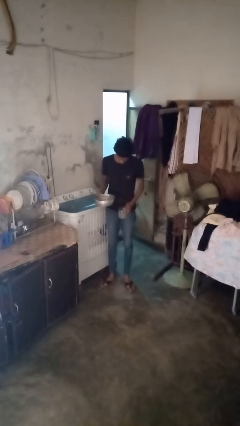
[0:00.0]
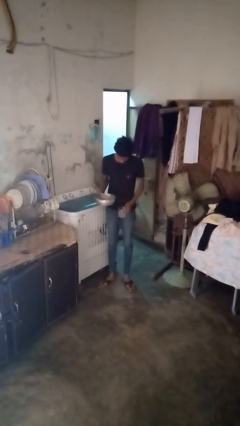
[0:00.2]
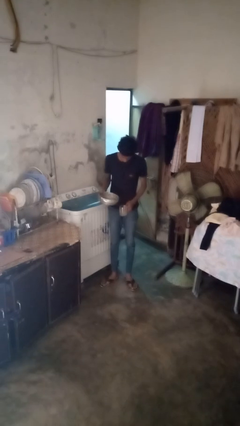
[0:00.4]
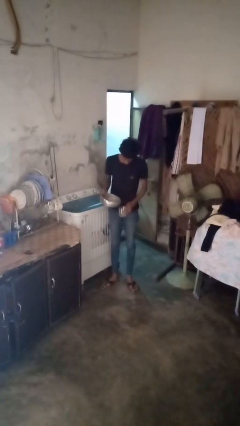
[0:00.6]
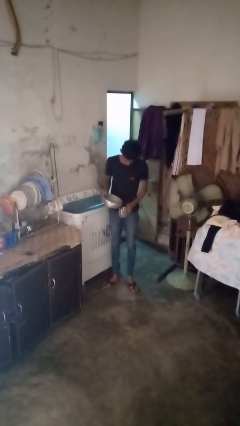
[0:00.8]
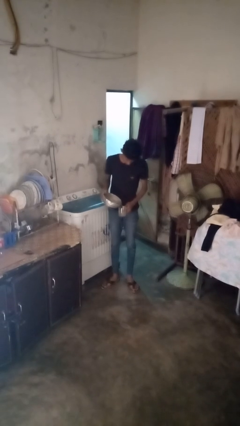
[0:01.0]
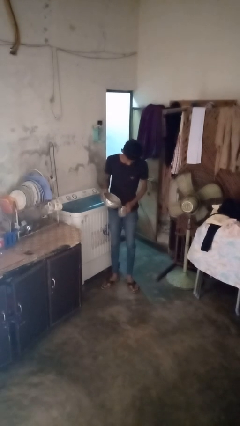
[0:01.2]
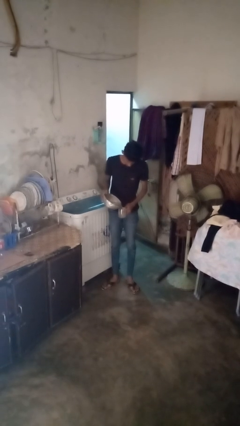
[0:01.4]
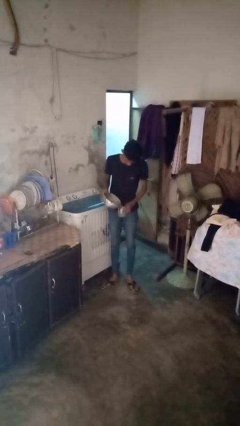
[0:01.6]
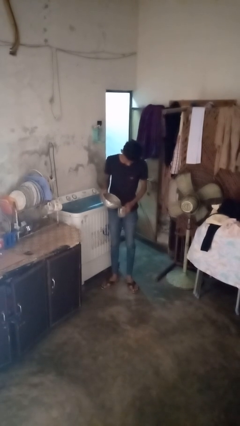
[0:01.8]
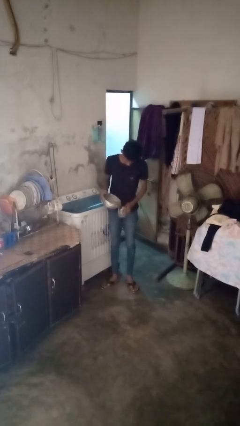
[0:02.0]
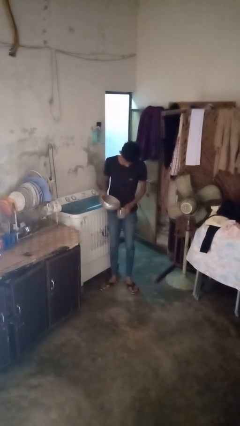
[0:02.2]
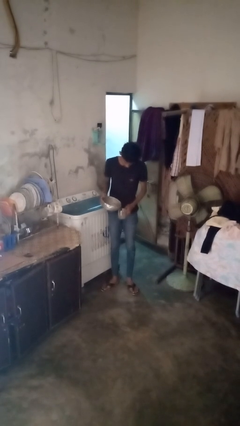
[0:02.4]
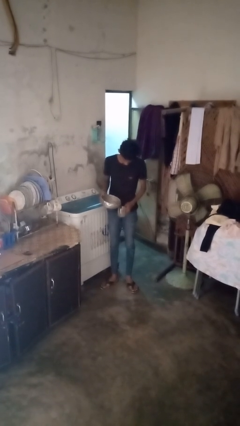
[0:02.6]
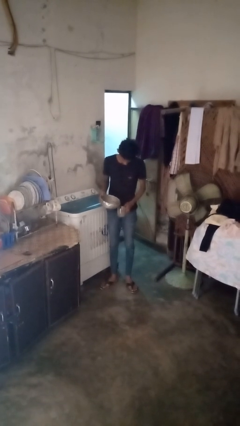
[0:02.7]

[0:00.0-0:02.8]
person pours liquid into cup

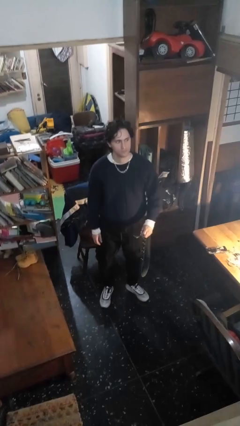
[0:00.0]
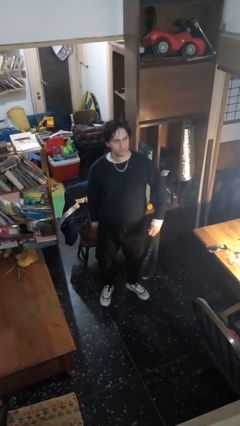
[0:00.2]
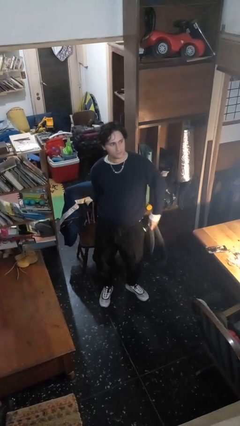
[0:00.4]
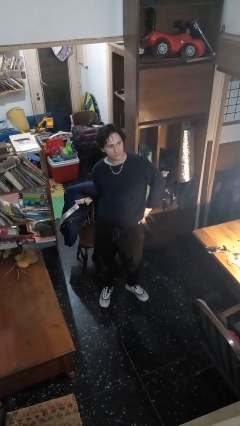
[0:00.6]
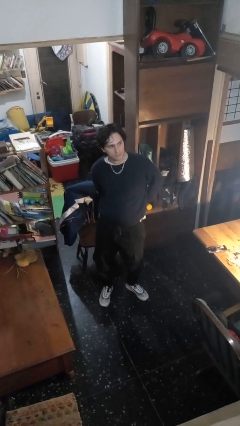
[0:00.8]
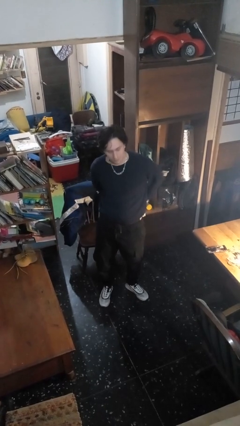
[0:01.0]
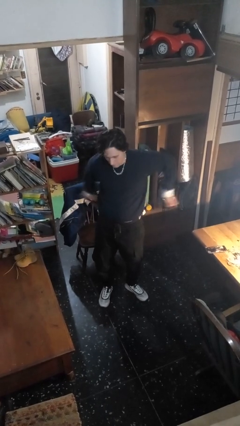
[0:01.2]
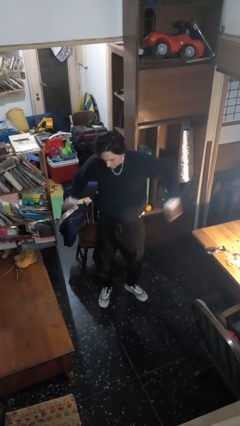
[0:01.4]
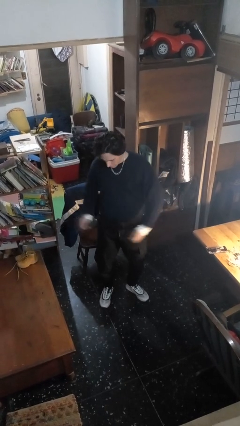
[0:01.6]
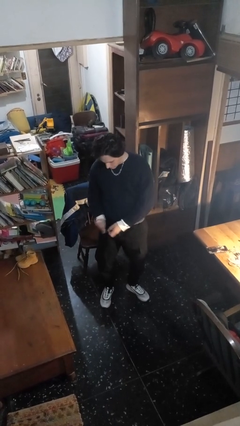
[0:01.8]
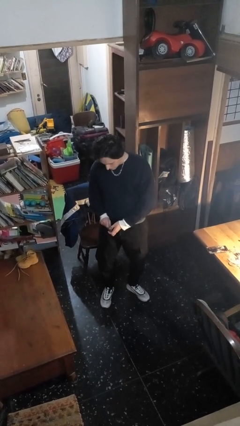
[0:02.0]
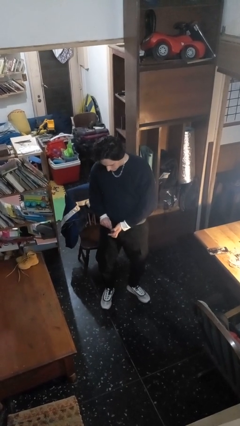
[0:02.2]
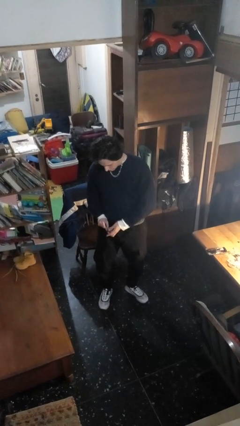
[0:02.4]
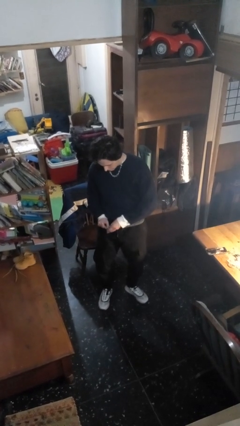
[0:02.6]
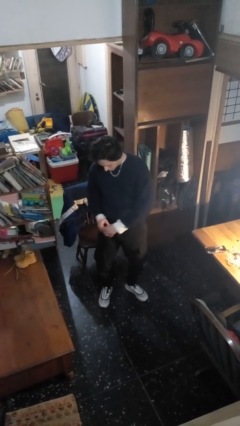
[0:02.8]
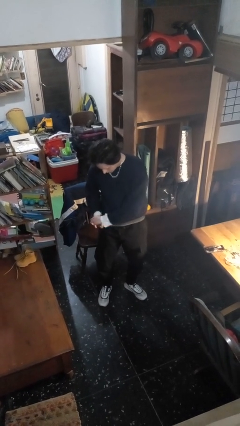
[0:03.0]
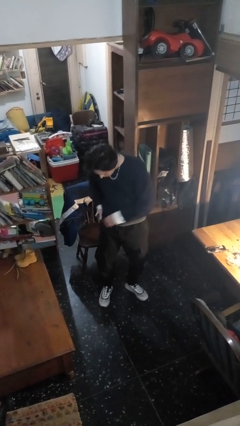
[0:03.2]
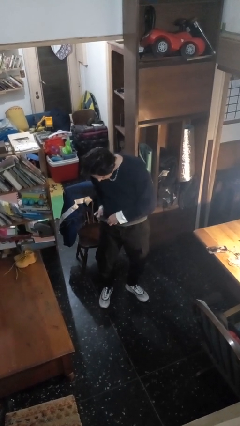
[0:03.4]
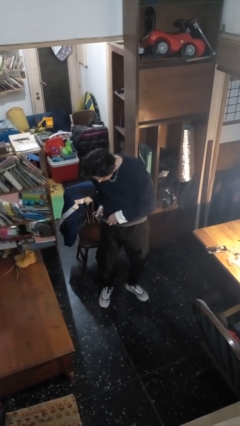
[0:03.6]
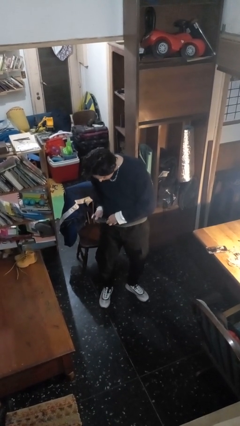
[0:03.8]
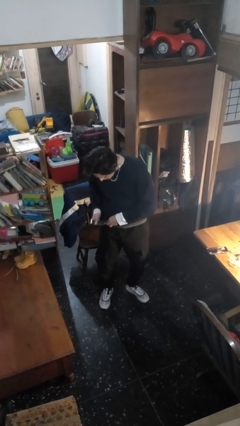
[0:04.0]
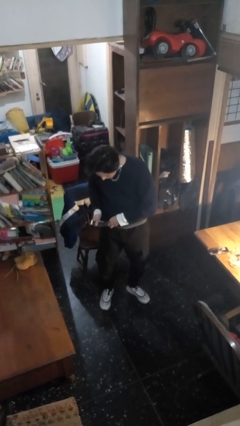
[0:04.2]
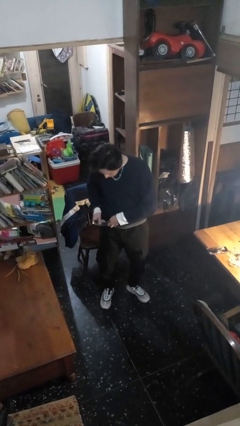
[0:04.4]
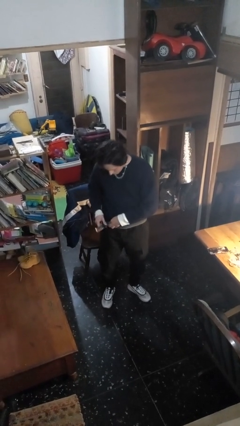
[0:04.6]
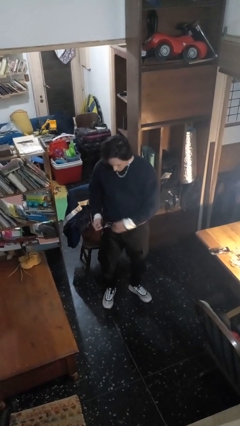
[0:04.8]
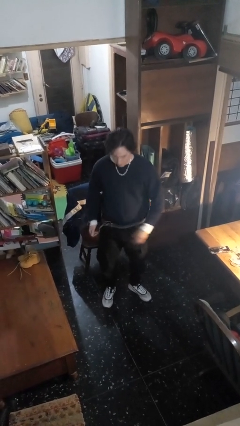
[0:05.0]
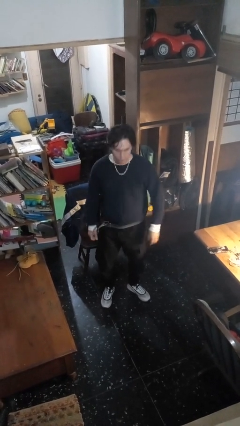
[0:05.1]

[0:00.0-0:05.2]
person puts on belt

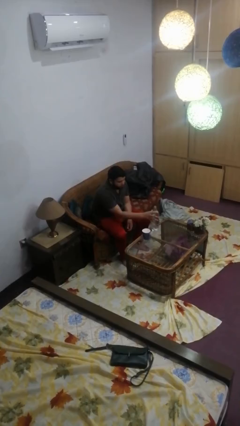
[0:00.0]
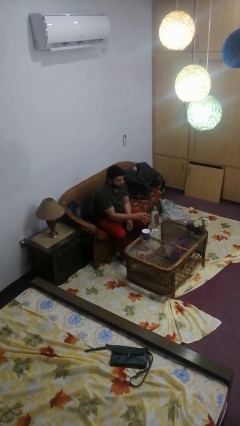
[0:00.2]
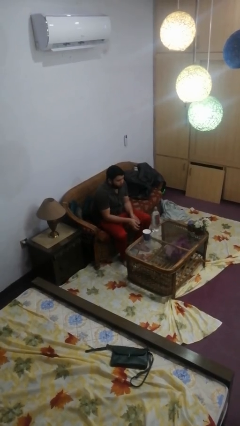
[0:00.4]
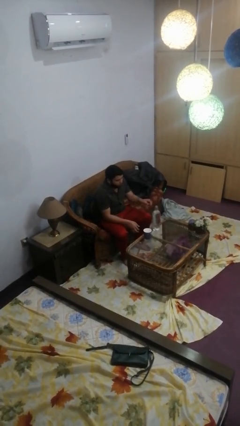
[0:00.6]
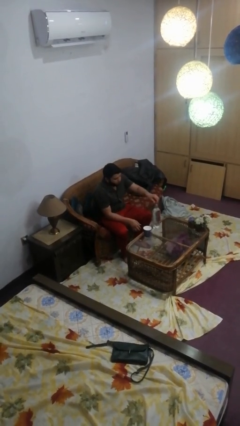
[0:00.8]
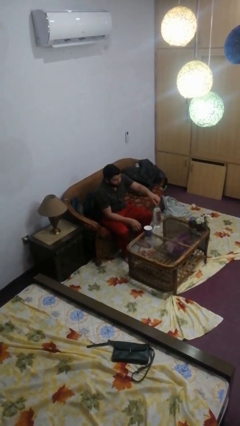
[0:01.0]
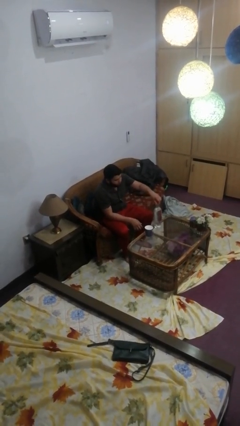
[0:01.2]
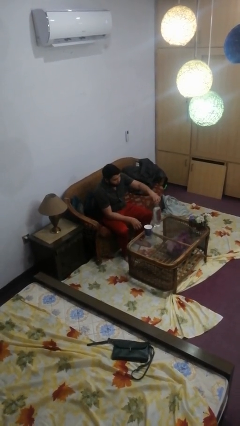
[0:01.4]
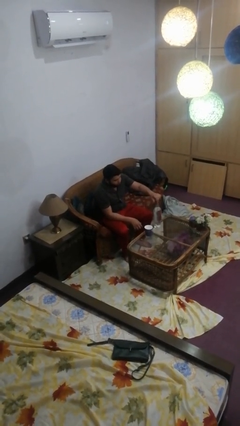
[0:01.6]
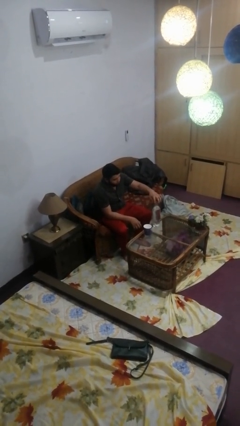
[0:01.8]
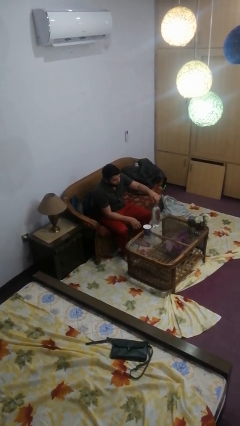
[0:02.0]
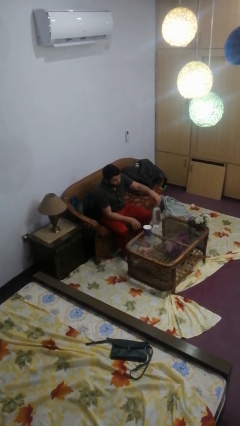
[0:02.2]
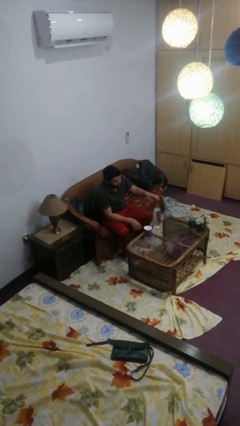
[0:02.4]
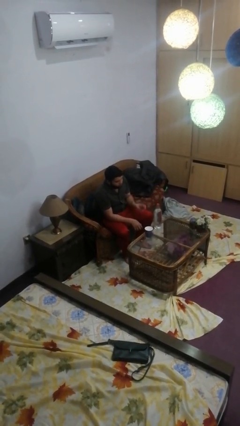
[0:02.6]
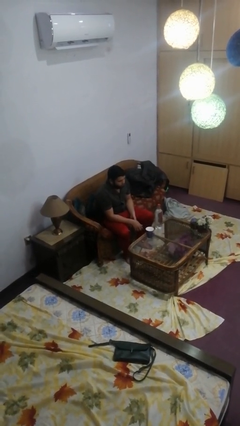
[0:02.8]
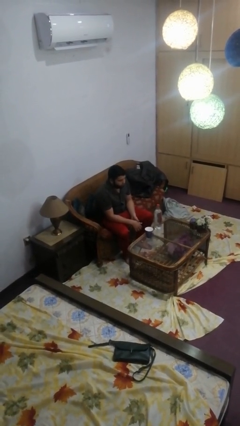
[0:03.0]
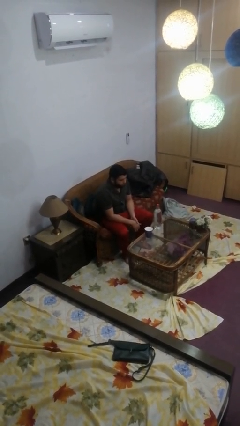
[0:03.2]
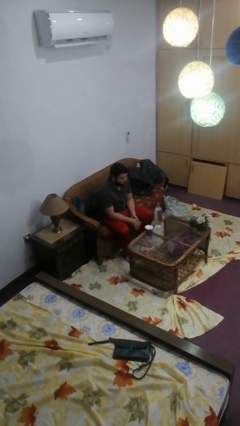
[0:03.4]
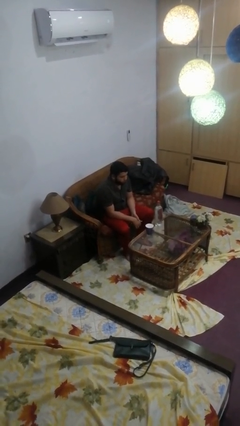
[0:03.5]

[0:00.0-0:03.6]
person screws lid to bottle

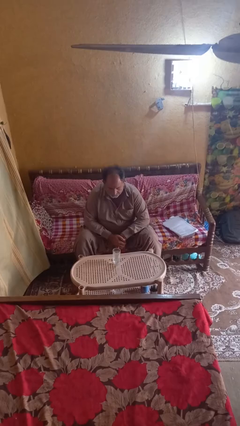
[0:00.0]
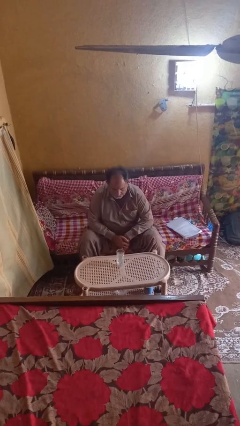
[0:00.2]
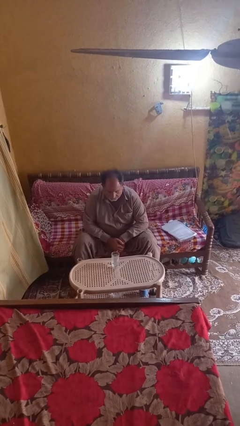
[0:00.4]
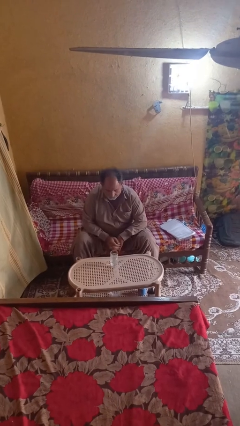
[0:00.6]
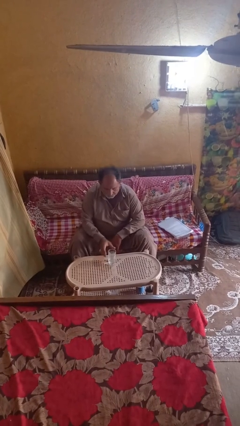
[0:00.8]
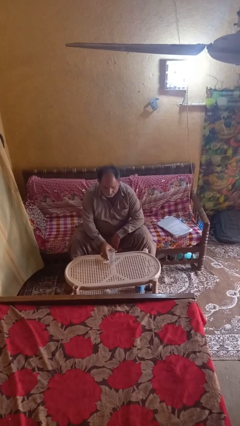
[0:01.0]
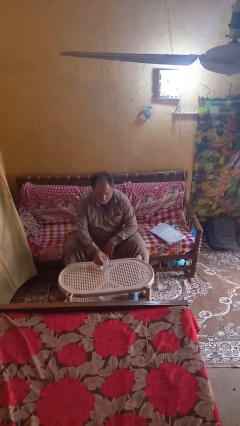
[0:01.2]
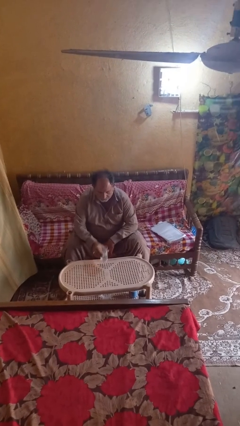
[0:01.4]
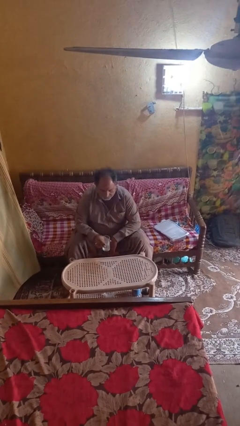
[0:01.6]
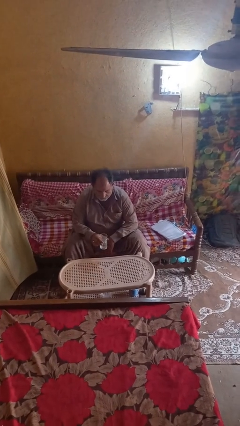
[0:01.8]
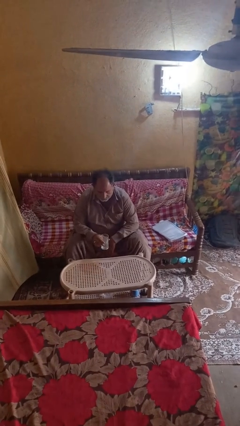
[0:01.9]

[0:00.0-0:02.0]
person picks up object from table

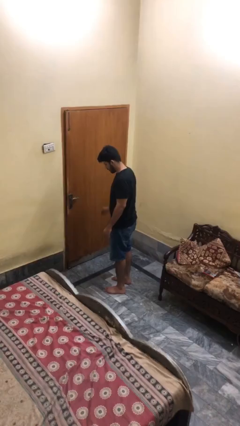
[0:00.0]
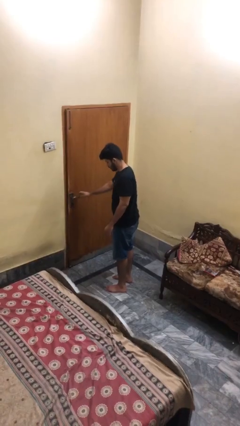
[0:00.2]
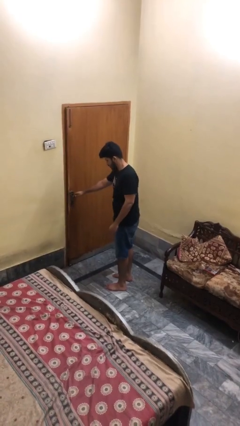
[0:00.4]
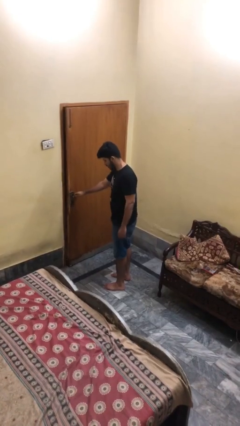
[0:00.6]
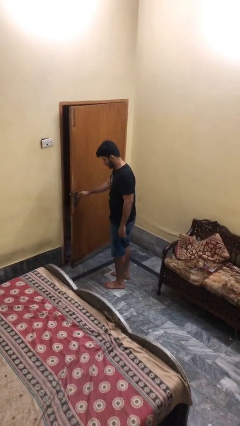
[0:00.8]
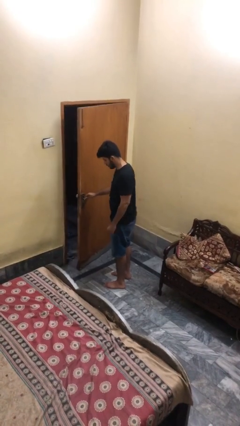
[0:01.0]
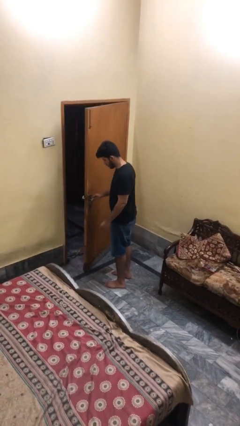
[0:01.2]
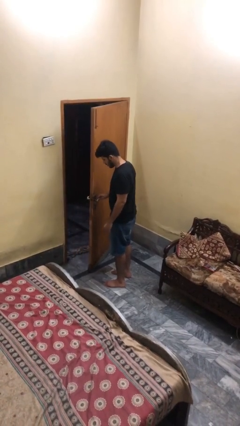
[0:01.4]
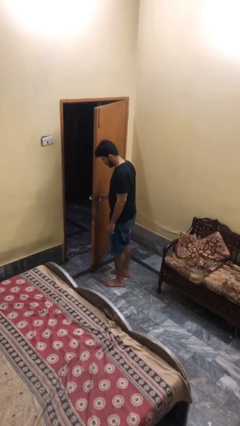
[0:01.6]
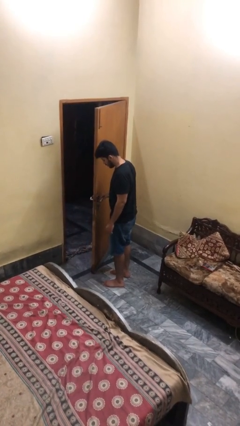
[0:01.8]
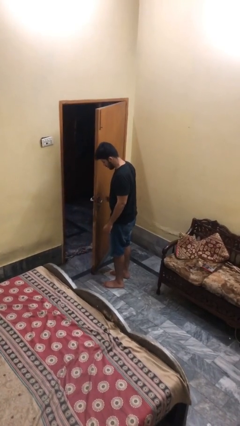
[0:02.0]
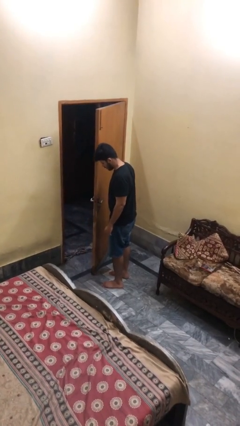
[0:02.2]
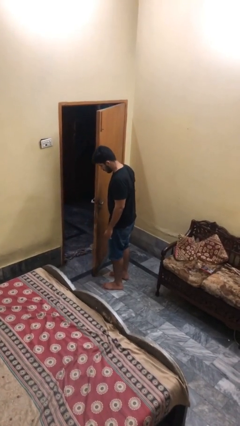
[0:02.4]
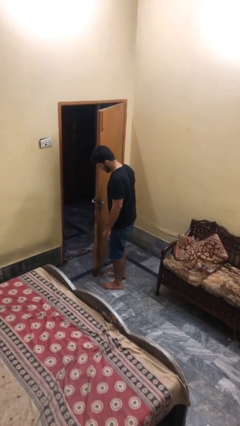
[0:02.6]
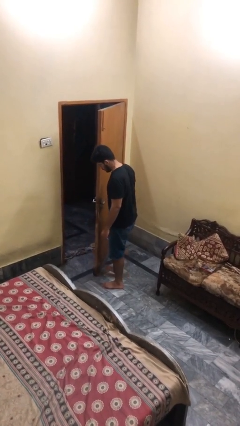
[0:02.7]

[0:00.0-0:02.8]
person opens facility door

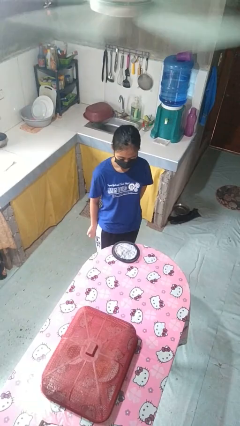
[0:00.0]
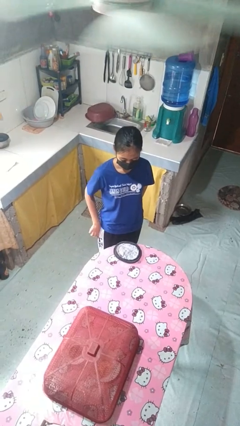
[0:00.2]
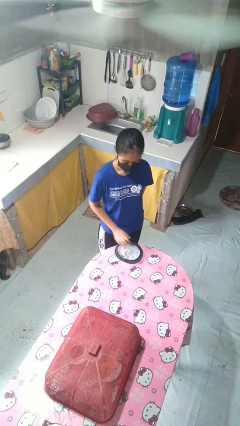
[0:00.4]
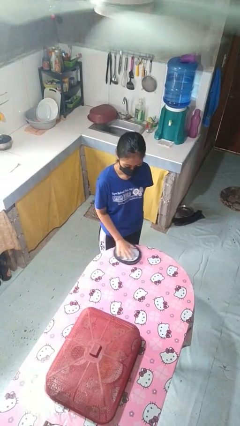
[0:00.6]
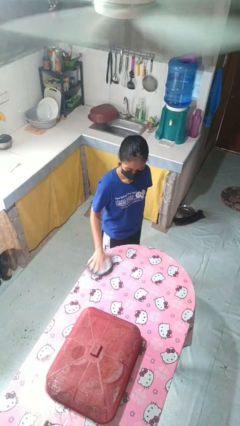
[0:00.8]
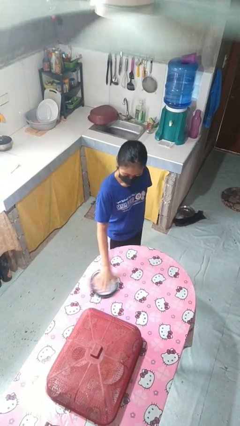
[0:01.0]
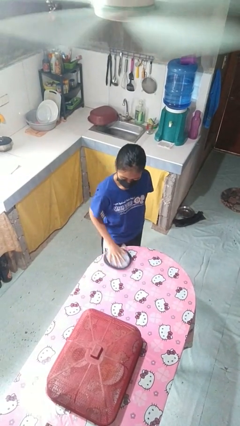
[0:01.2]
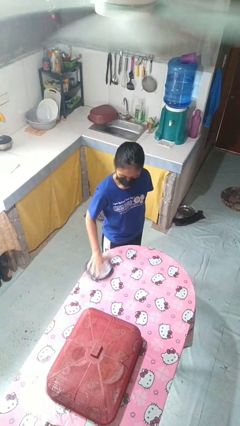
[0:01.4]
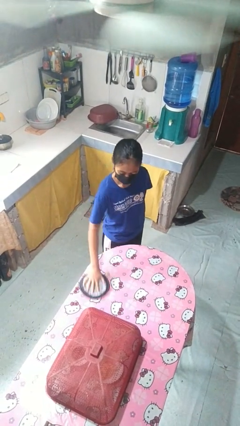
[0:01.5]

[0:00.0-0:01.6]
person cleans table with rag
